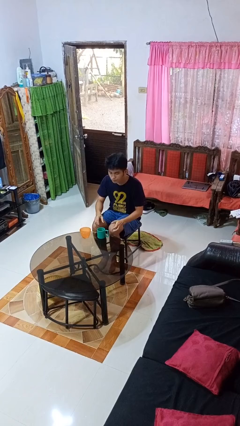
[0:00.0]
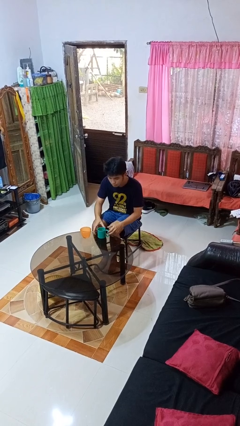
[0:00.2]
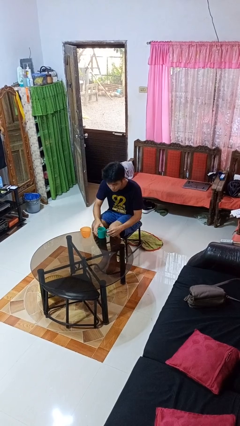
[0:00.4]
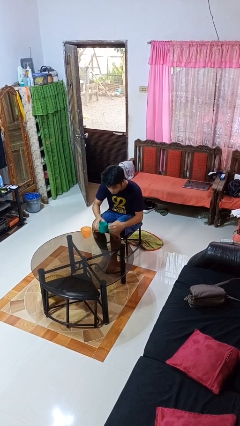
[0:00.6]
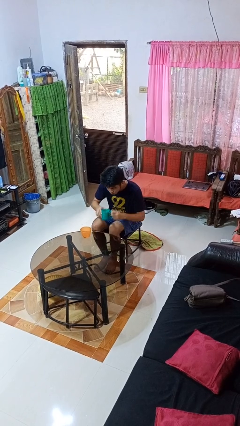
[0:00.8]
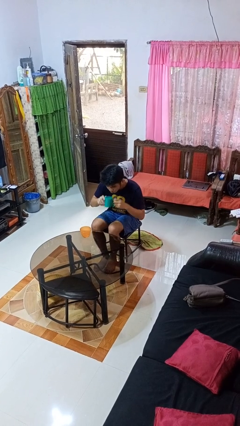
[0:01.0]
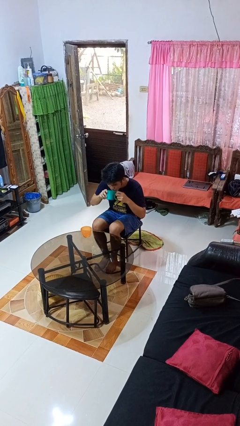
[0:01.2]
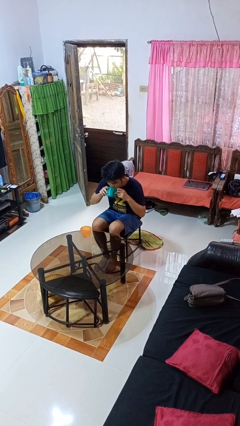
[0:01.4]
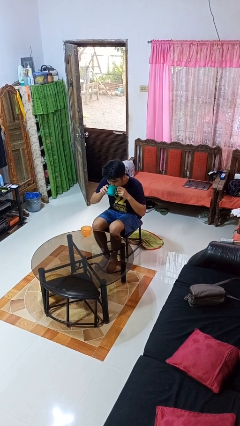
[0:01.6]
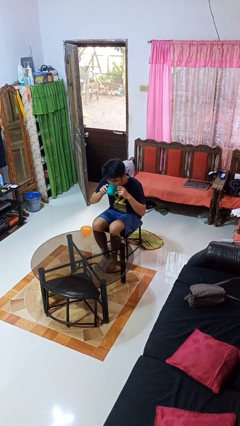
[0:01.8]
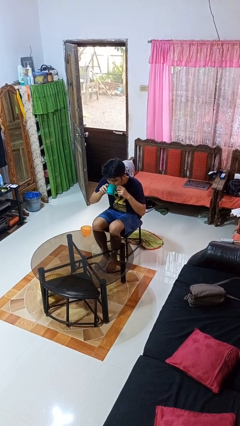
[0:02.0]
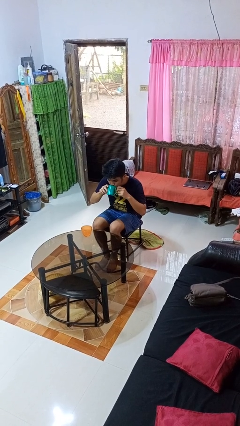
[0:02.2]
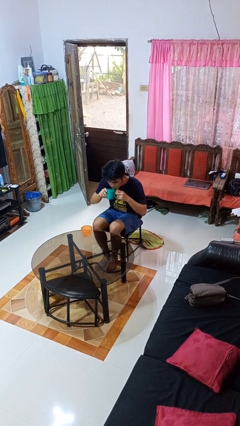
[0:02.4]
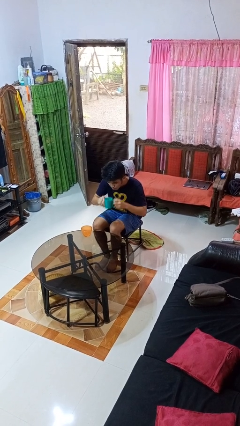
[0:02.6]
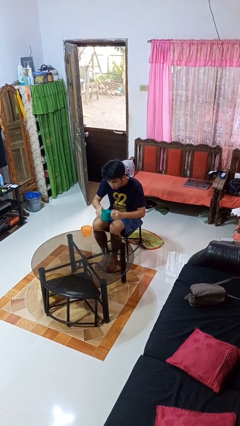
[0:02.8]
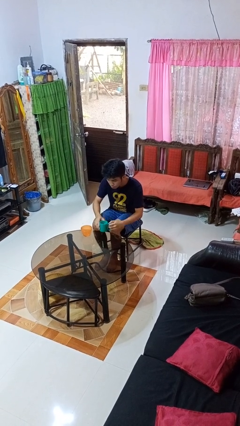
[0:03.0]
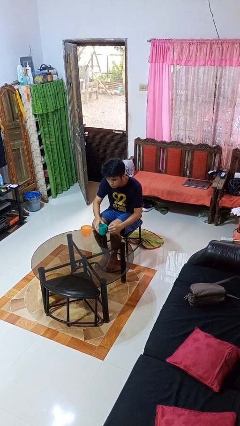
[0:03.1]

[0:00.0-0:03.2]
person drinks from cup

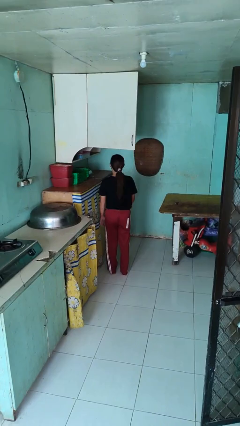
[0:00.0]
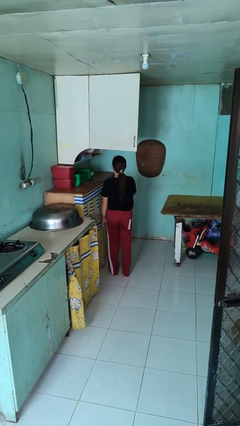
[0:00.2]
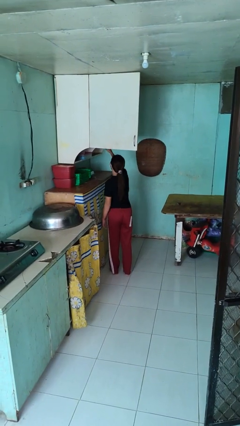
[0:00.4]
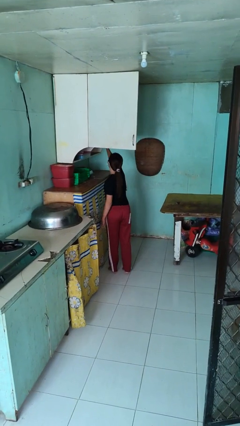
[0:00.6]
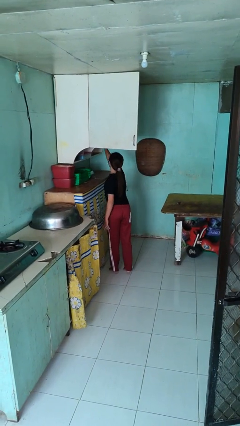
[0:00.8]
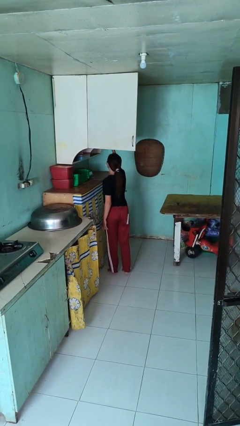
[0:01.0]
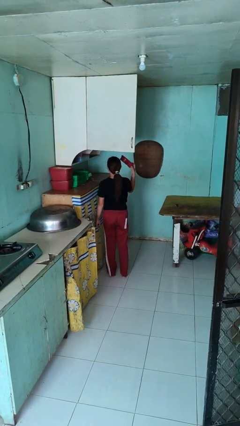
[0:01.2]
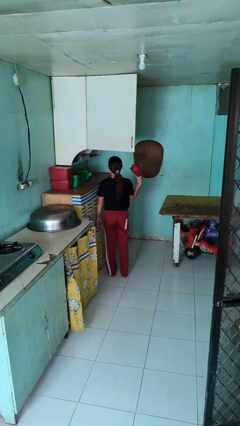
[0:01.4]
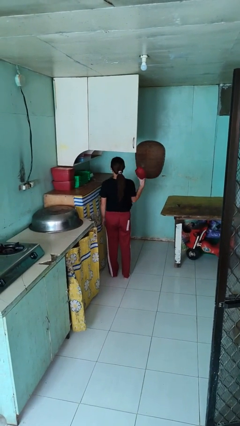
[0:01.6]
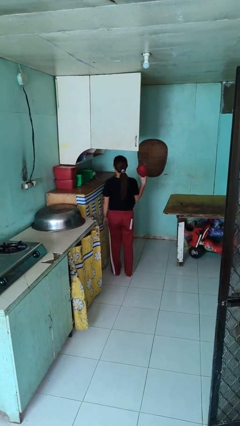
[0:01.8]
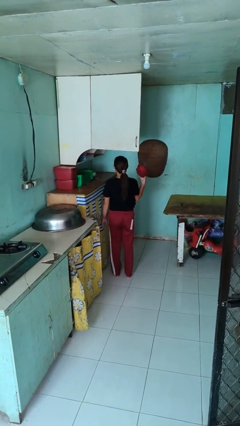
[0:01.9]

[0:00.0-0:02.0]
person takes object from cabinet

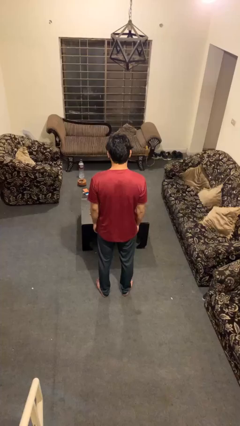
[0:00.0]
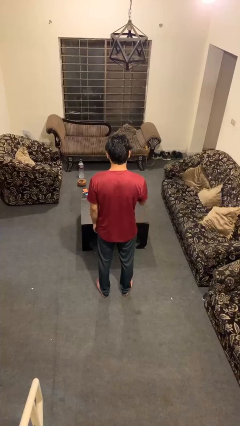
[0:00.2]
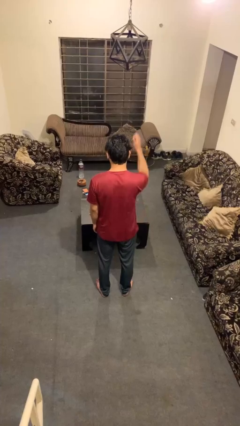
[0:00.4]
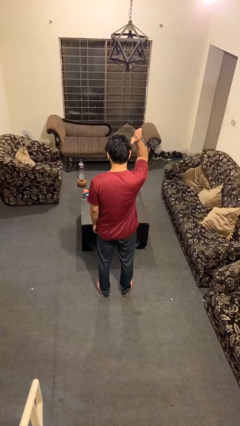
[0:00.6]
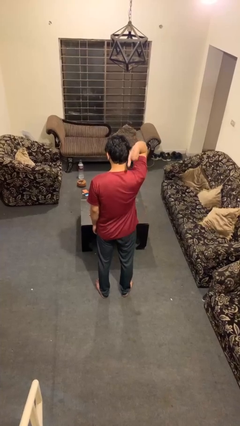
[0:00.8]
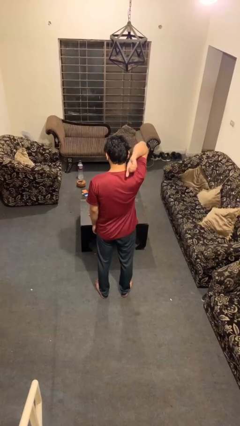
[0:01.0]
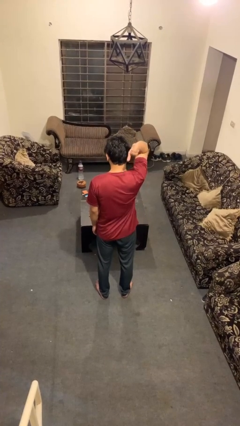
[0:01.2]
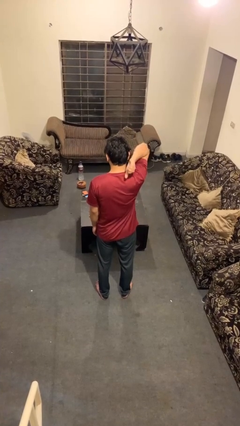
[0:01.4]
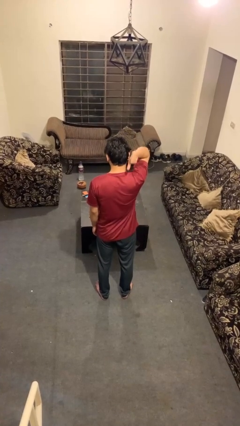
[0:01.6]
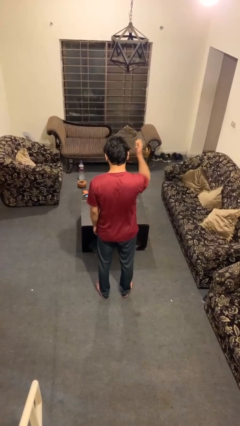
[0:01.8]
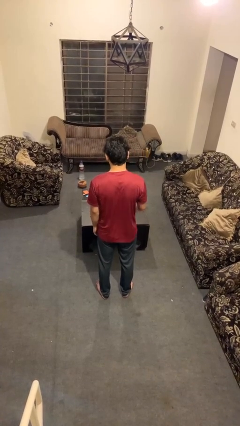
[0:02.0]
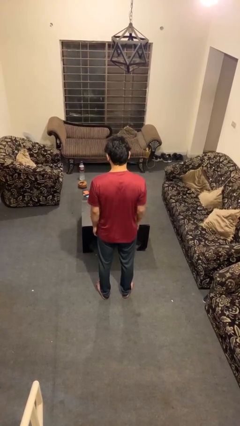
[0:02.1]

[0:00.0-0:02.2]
person gestures behind me

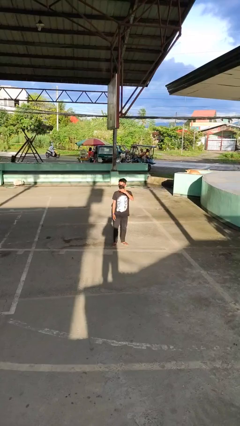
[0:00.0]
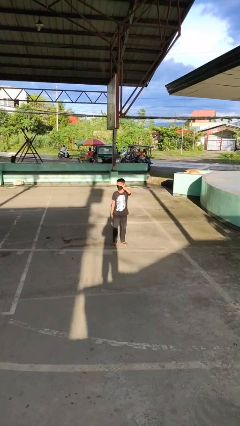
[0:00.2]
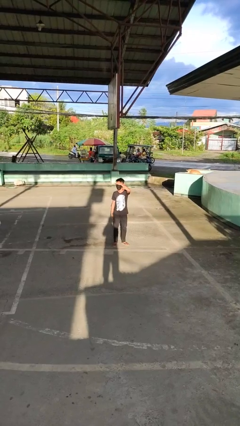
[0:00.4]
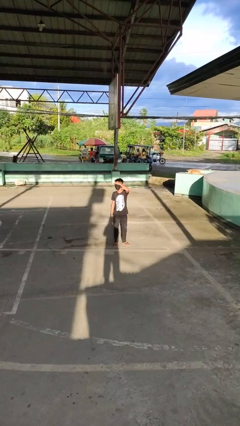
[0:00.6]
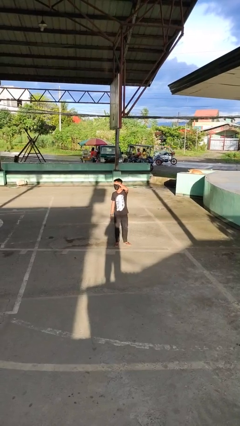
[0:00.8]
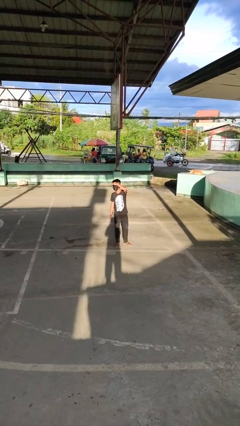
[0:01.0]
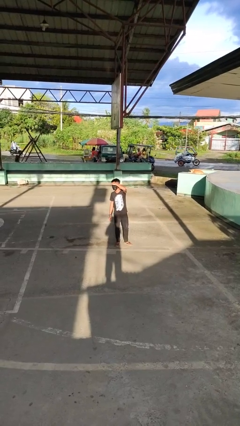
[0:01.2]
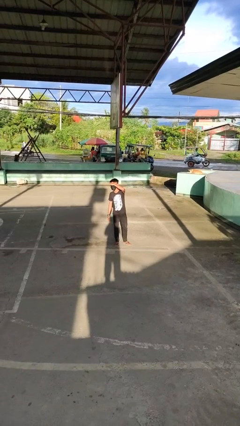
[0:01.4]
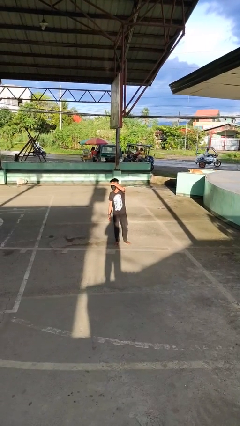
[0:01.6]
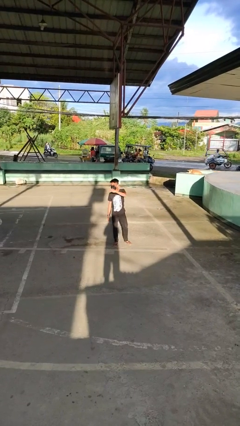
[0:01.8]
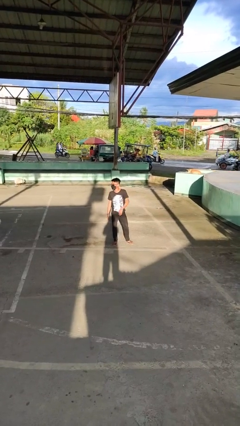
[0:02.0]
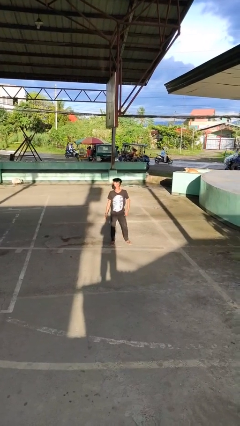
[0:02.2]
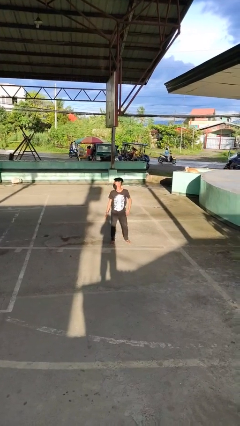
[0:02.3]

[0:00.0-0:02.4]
person shades eyes

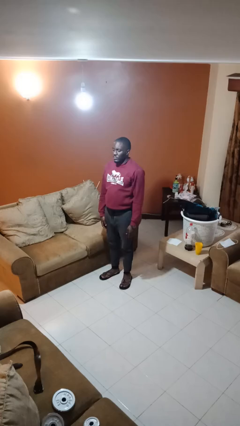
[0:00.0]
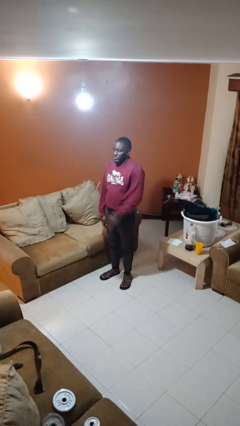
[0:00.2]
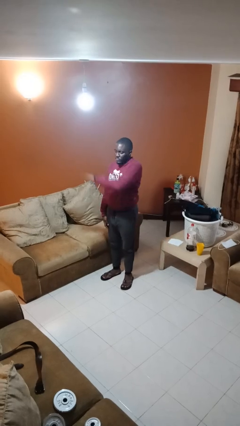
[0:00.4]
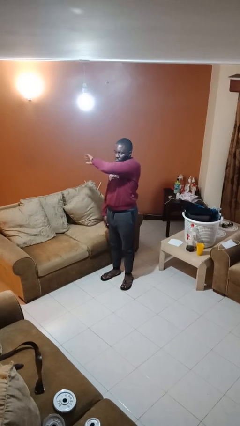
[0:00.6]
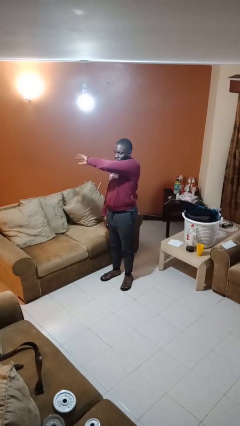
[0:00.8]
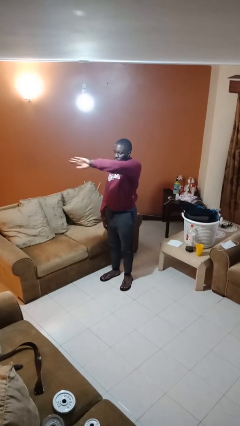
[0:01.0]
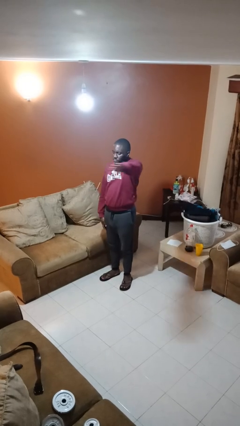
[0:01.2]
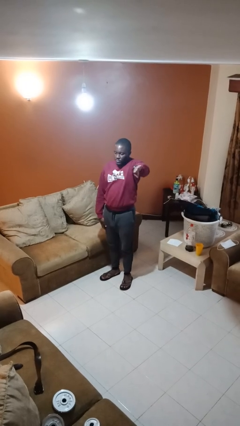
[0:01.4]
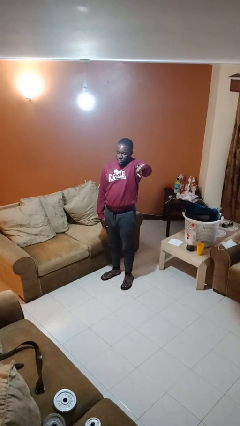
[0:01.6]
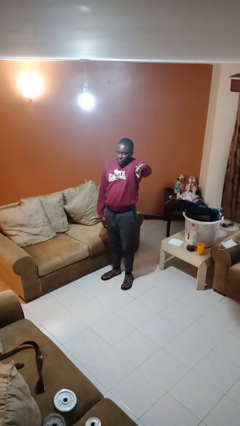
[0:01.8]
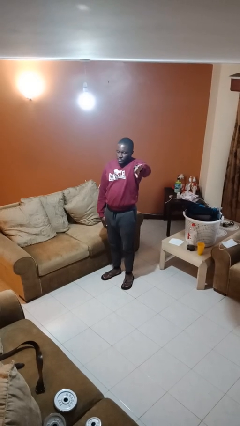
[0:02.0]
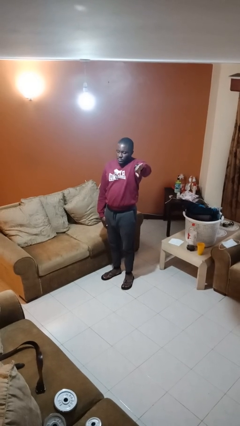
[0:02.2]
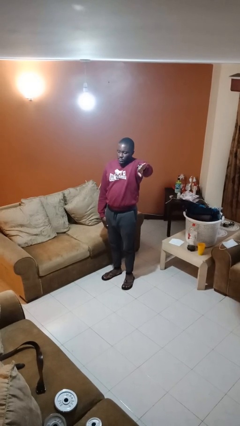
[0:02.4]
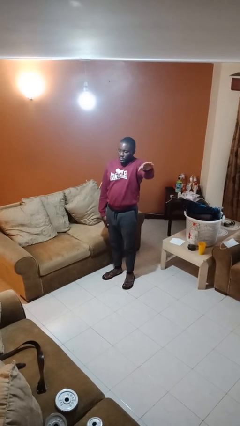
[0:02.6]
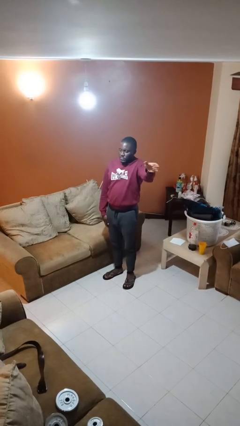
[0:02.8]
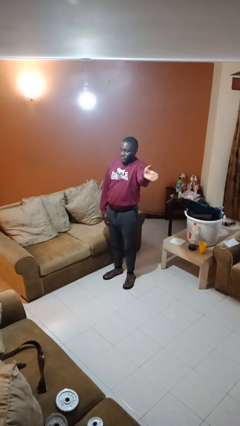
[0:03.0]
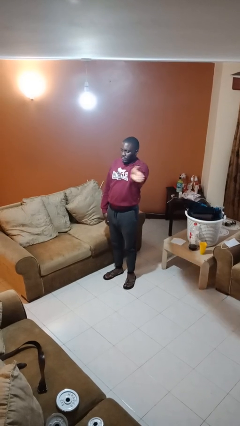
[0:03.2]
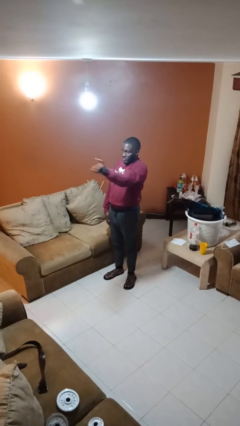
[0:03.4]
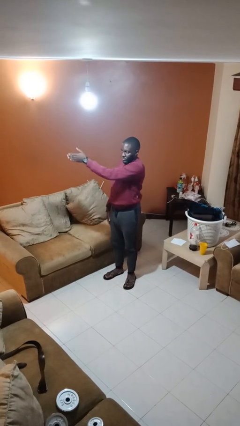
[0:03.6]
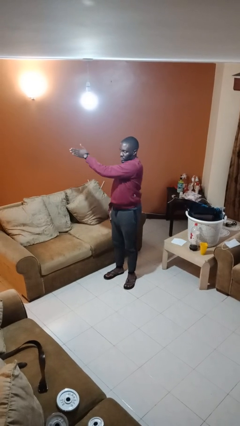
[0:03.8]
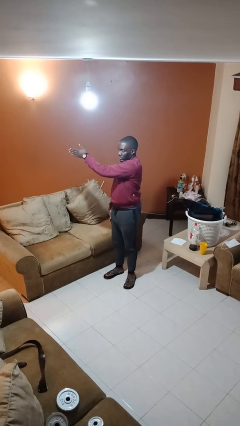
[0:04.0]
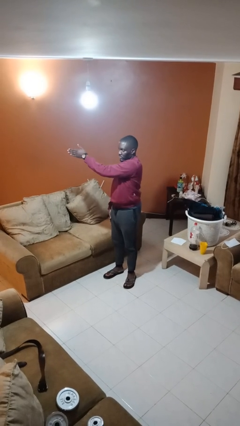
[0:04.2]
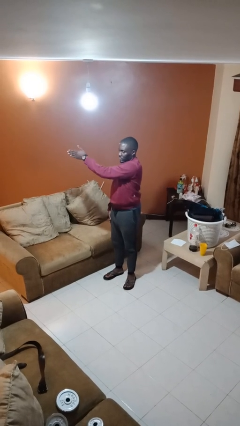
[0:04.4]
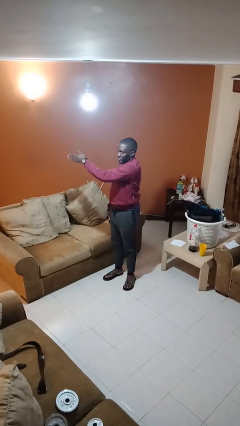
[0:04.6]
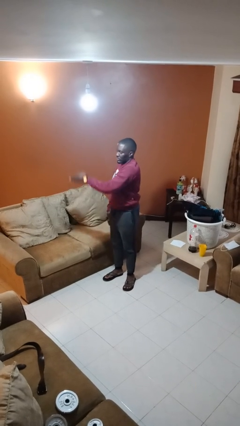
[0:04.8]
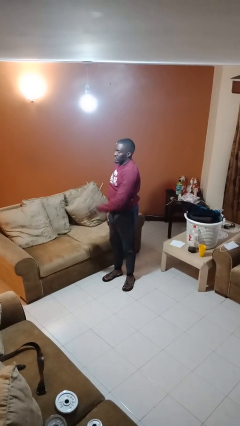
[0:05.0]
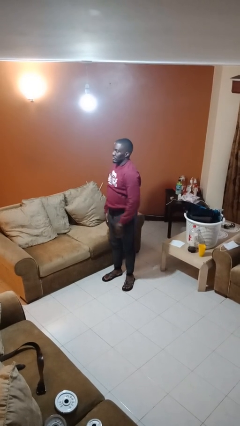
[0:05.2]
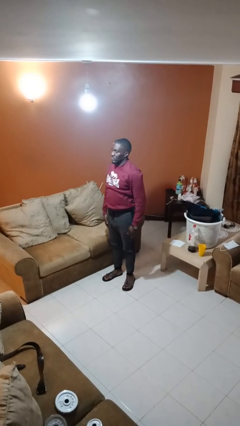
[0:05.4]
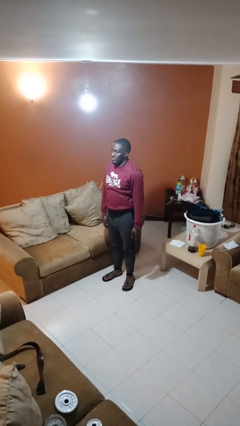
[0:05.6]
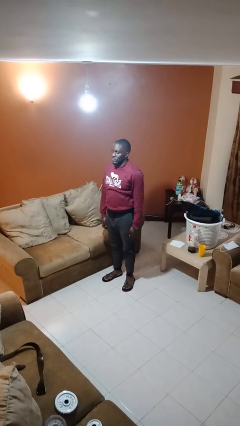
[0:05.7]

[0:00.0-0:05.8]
person gestures swipe left

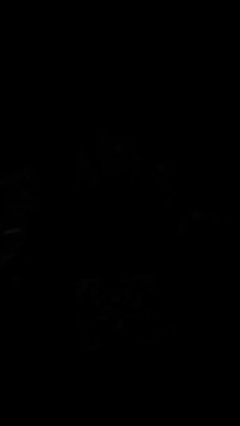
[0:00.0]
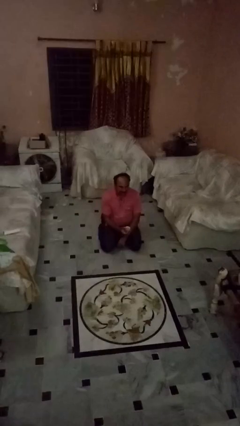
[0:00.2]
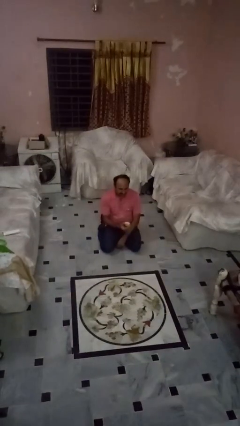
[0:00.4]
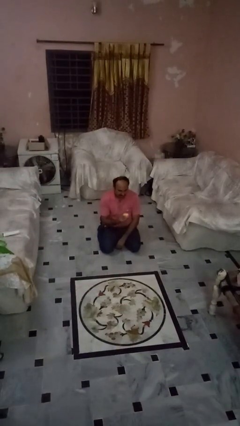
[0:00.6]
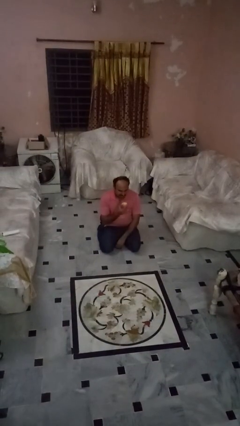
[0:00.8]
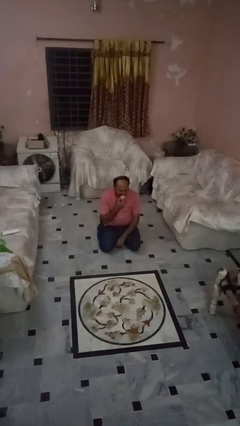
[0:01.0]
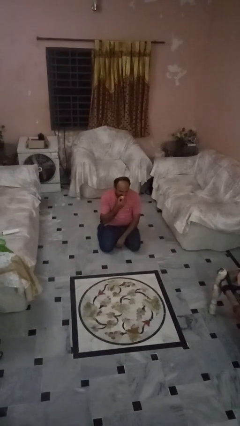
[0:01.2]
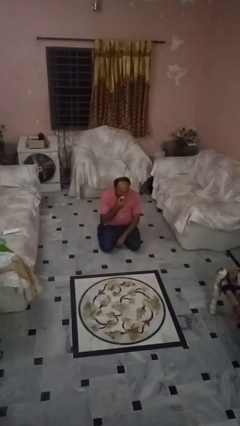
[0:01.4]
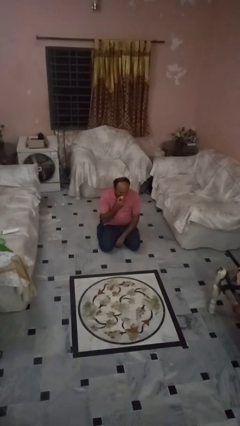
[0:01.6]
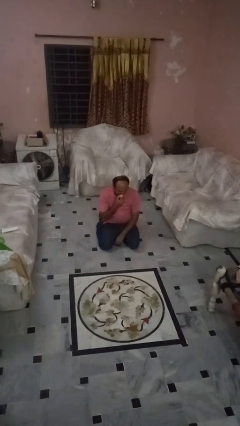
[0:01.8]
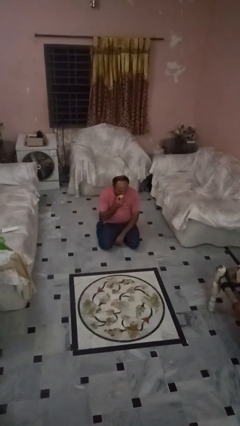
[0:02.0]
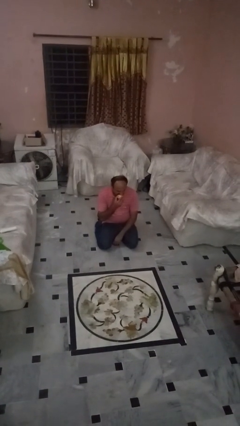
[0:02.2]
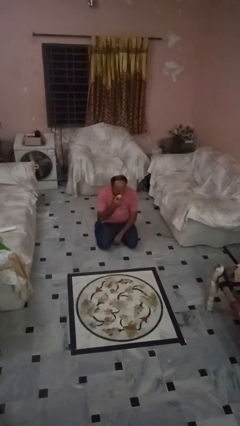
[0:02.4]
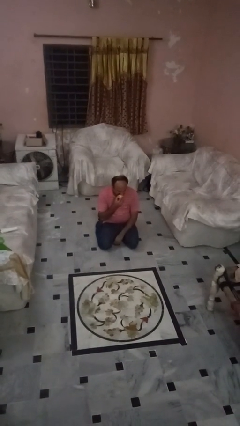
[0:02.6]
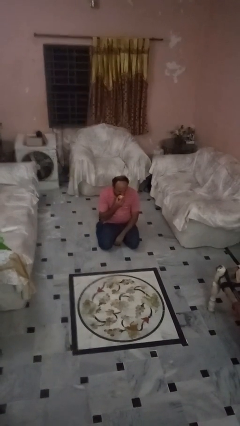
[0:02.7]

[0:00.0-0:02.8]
person eats apple
